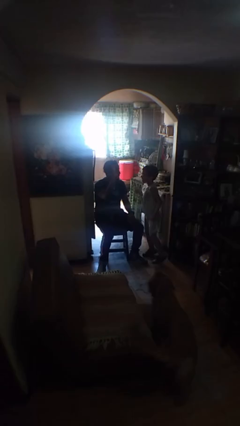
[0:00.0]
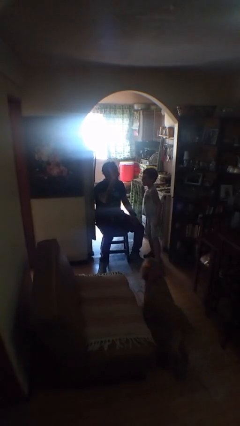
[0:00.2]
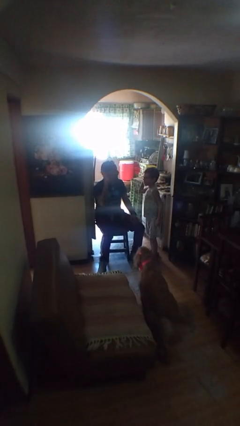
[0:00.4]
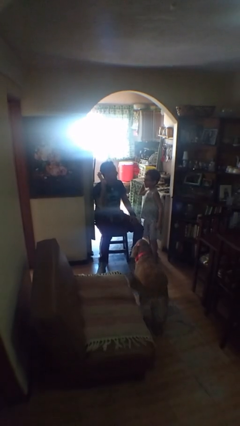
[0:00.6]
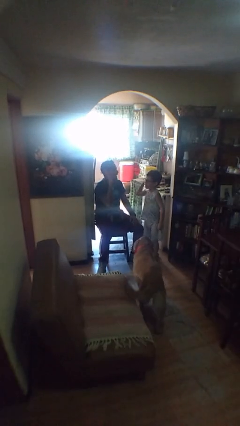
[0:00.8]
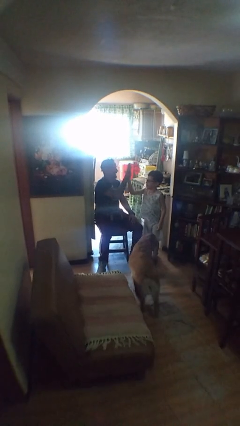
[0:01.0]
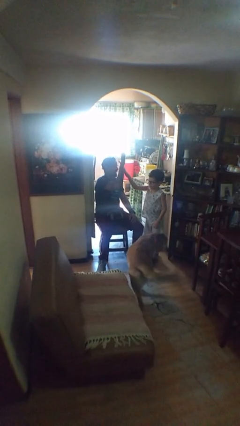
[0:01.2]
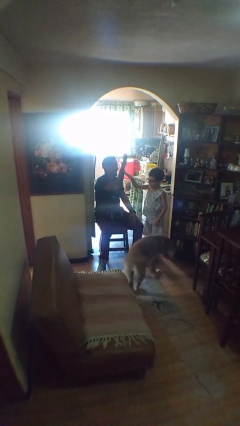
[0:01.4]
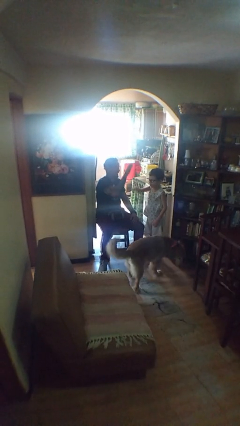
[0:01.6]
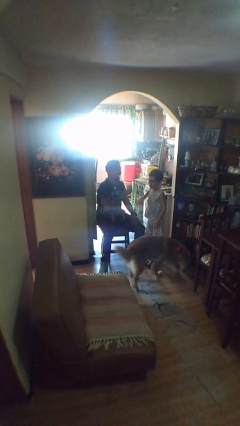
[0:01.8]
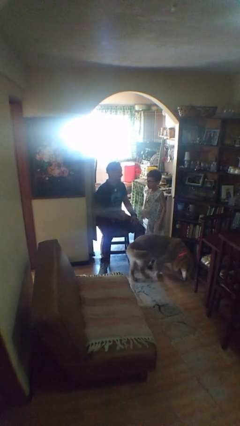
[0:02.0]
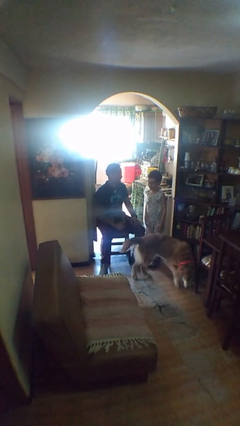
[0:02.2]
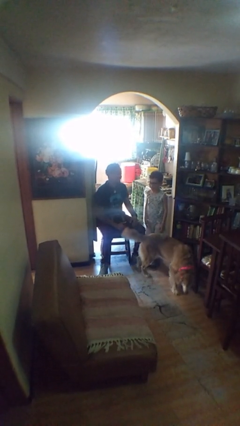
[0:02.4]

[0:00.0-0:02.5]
person highfives hand

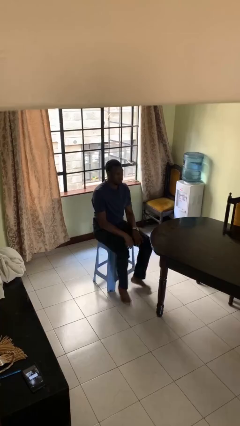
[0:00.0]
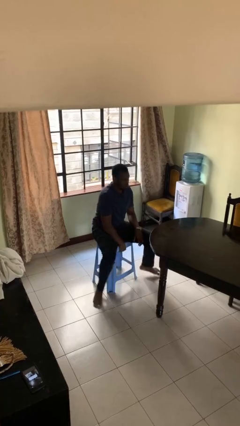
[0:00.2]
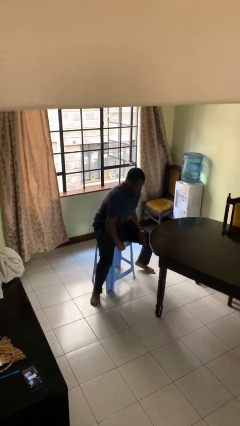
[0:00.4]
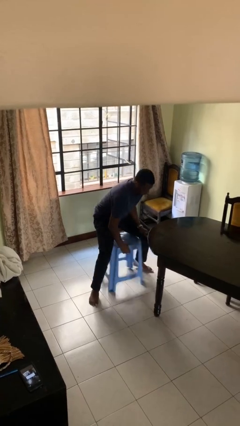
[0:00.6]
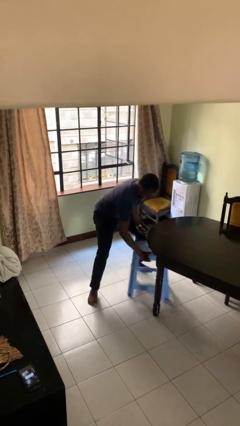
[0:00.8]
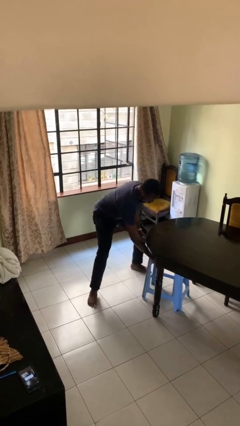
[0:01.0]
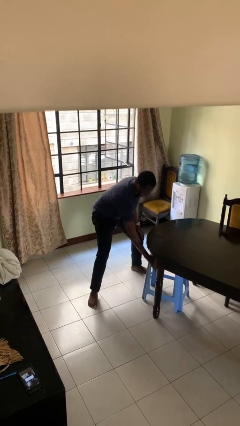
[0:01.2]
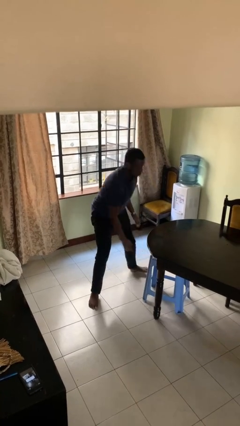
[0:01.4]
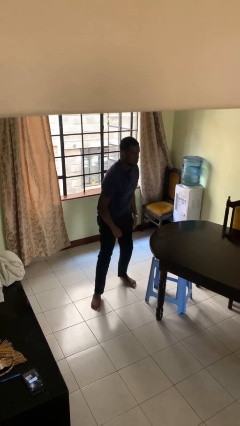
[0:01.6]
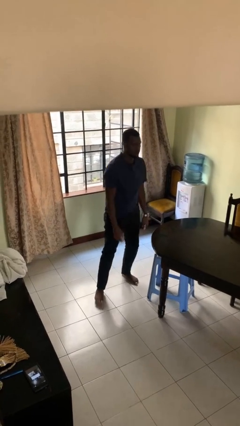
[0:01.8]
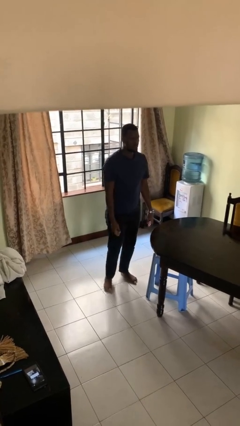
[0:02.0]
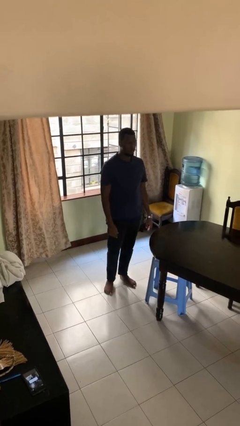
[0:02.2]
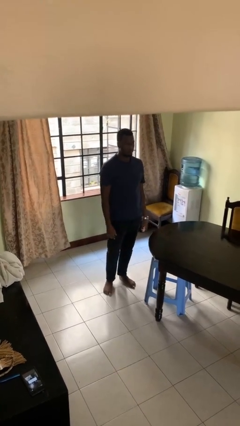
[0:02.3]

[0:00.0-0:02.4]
person stands up

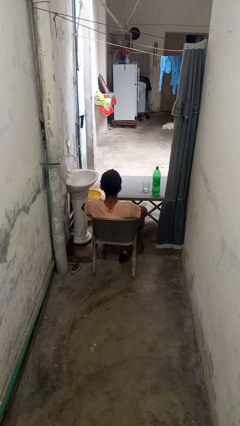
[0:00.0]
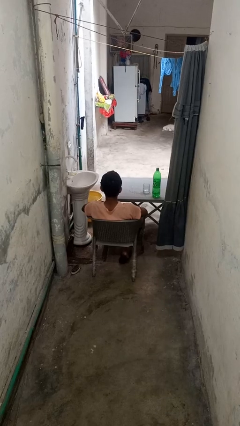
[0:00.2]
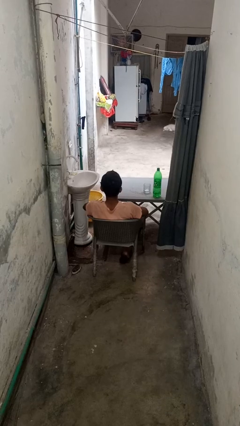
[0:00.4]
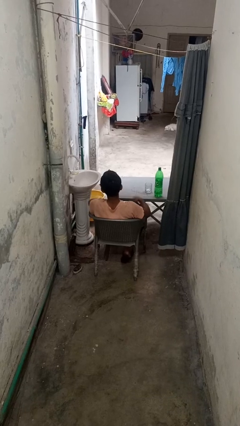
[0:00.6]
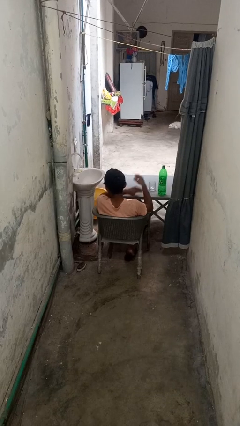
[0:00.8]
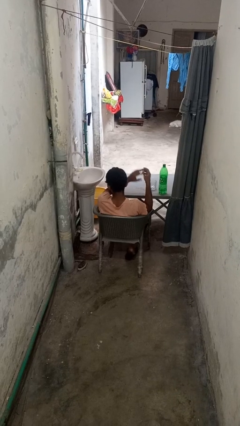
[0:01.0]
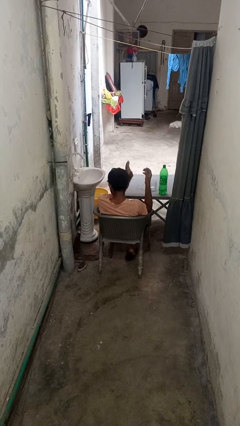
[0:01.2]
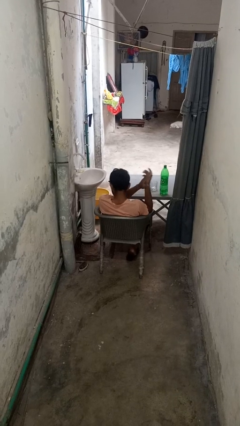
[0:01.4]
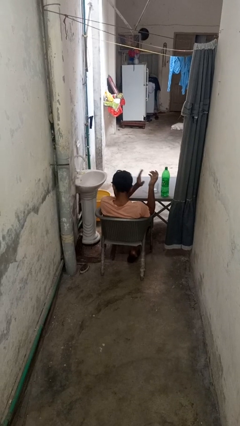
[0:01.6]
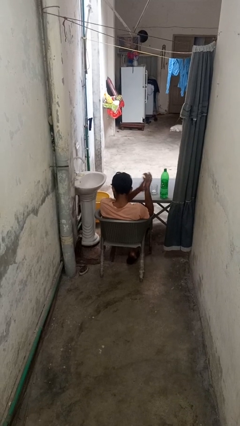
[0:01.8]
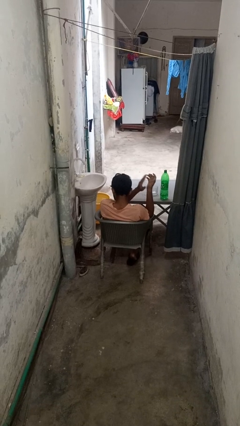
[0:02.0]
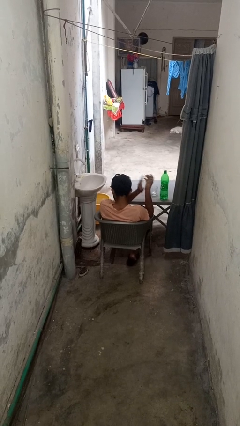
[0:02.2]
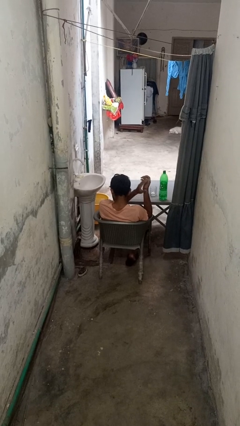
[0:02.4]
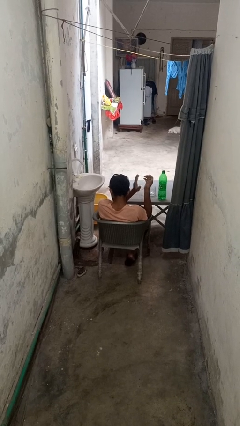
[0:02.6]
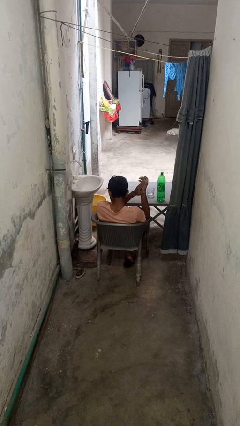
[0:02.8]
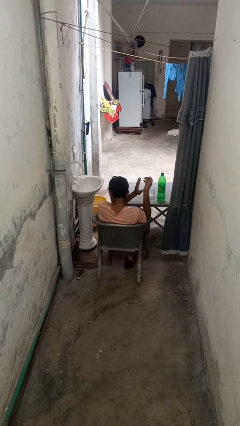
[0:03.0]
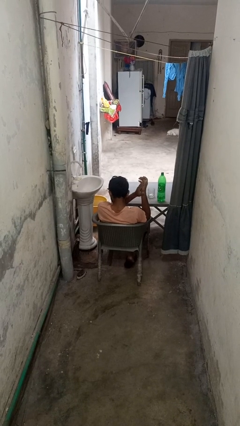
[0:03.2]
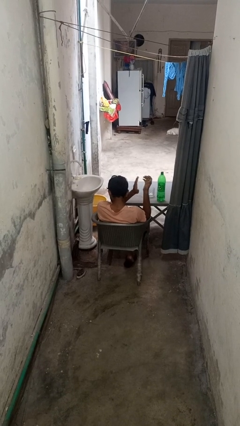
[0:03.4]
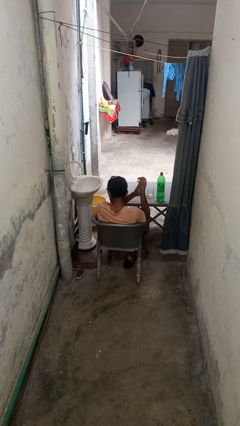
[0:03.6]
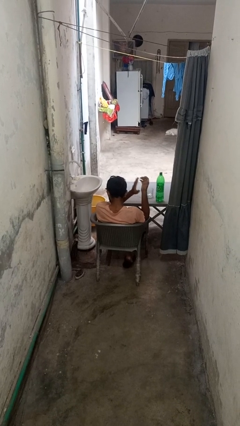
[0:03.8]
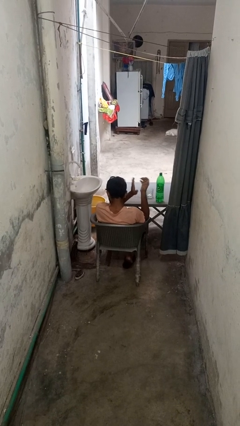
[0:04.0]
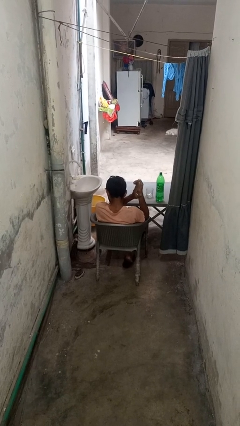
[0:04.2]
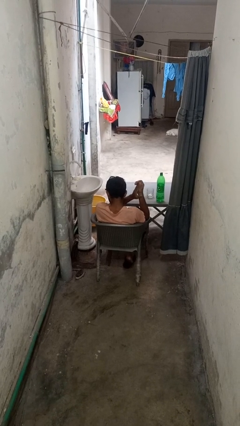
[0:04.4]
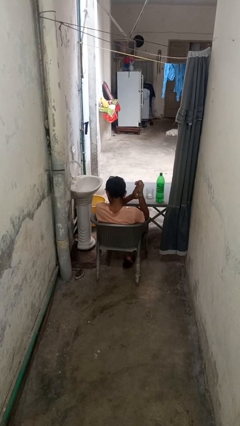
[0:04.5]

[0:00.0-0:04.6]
person claps hands

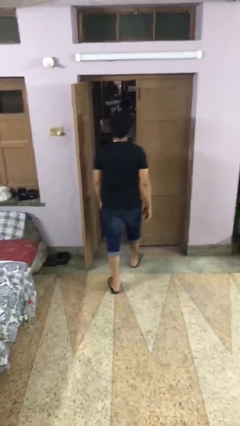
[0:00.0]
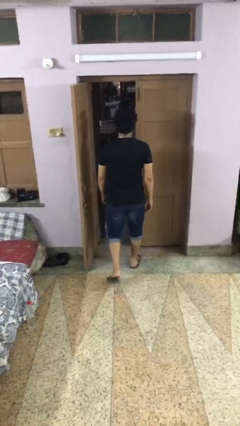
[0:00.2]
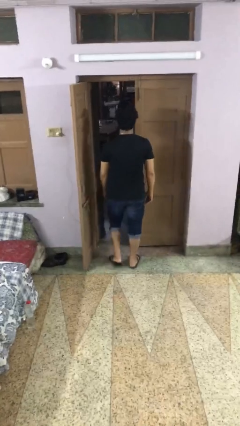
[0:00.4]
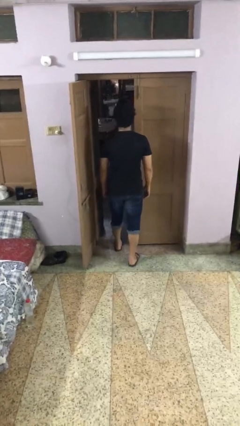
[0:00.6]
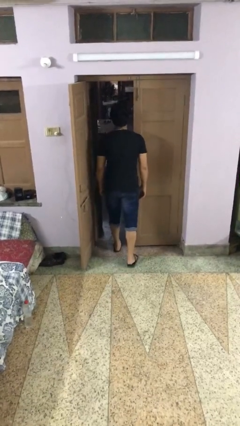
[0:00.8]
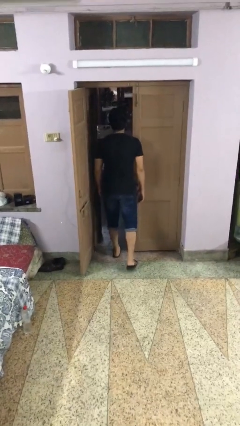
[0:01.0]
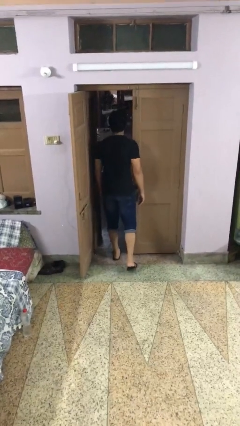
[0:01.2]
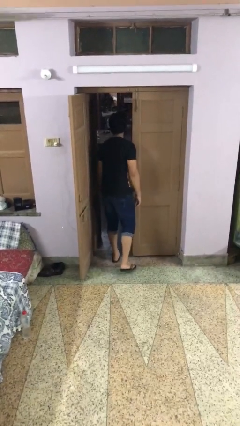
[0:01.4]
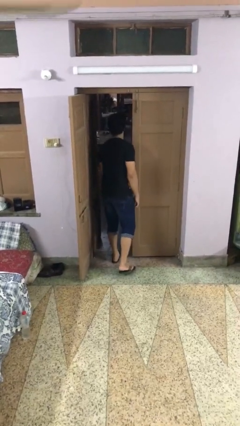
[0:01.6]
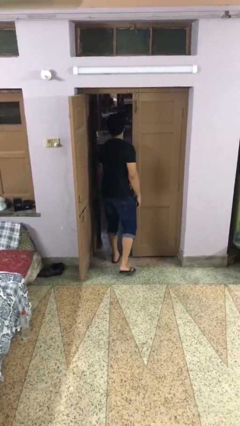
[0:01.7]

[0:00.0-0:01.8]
person bumps into wall

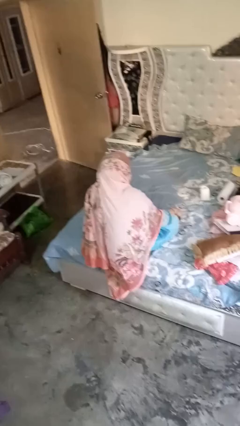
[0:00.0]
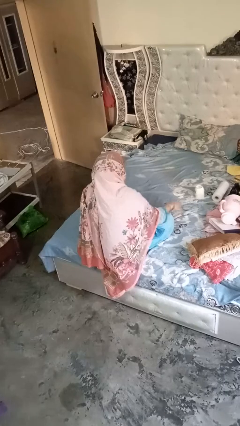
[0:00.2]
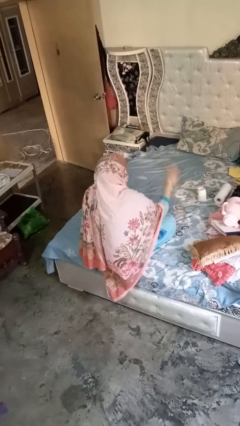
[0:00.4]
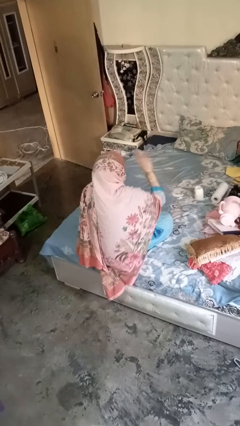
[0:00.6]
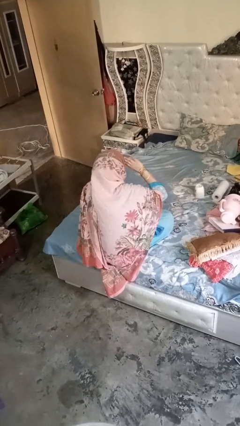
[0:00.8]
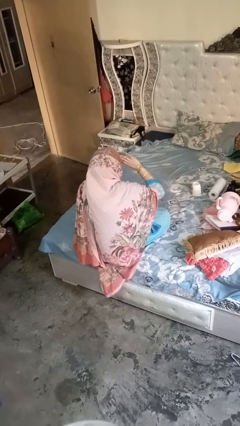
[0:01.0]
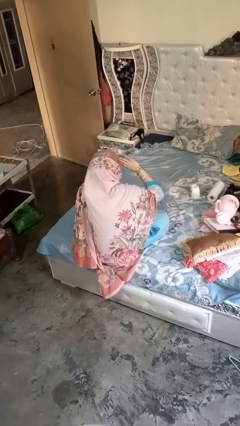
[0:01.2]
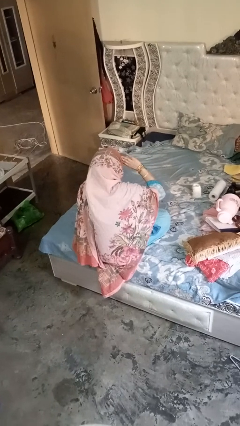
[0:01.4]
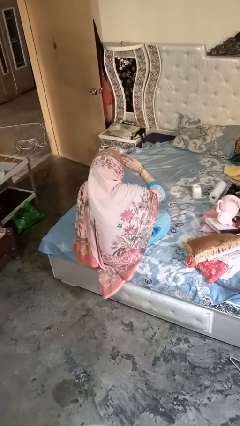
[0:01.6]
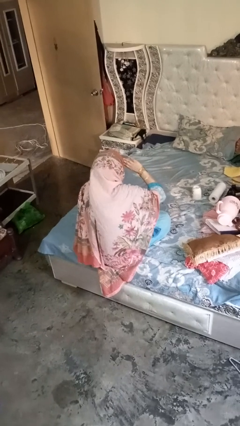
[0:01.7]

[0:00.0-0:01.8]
person salutes

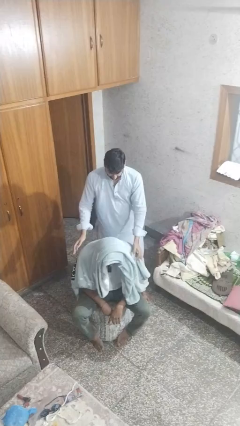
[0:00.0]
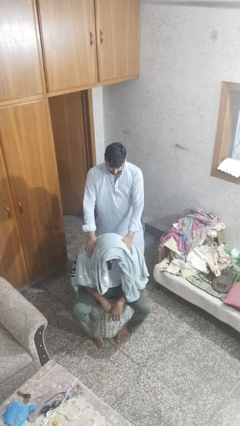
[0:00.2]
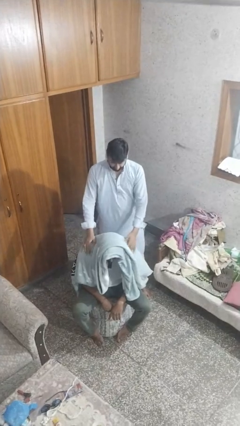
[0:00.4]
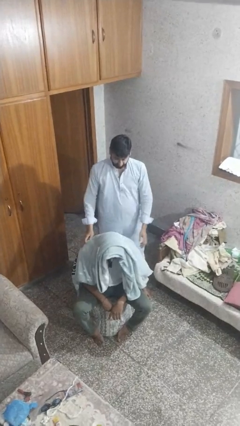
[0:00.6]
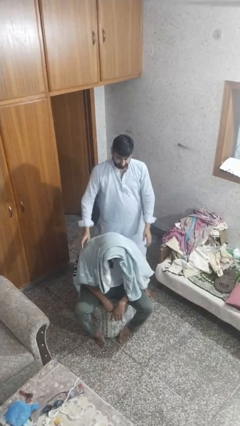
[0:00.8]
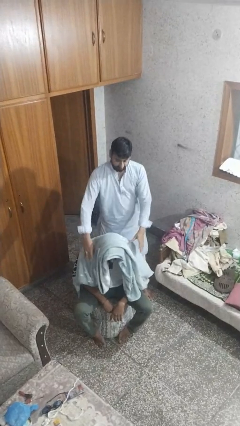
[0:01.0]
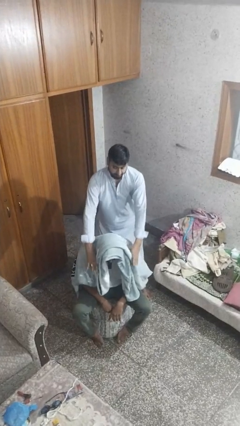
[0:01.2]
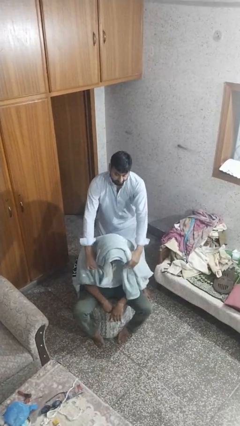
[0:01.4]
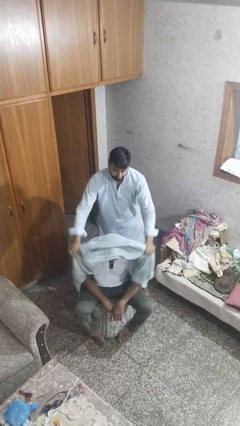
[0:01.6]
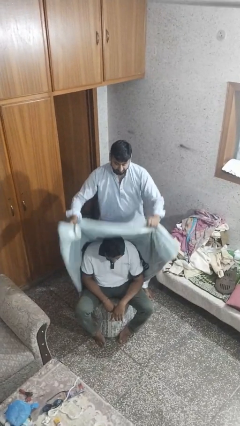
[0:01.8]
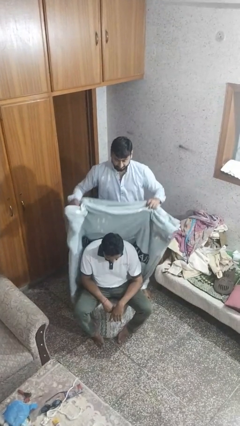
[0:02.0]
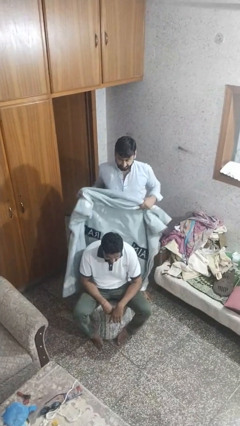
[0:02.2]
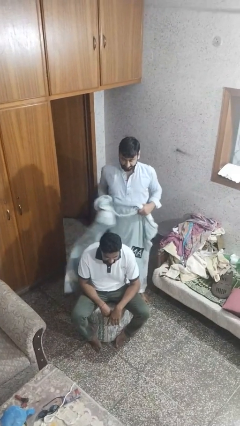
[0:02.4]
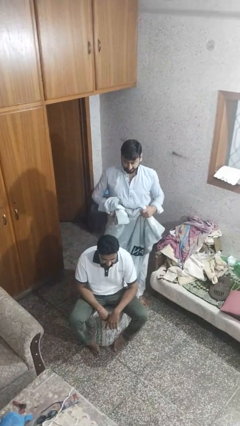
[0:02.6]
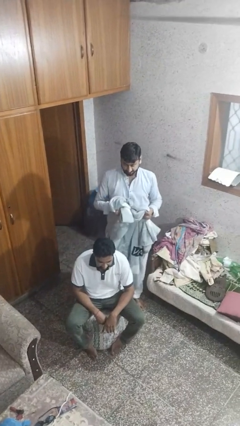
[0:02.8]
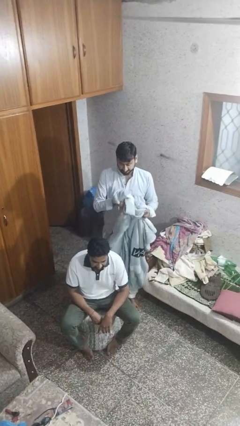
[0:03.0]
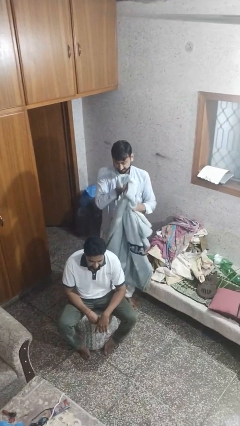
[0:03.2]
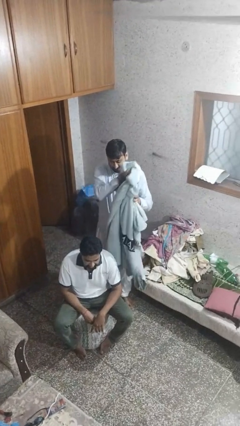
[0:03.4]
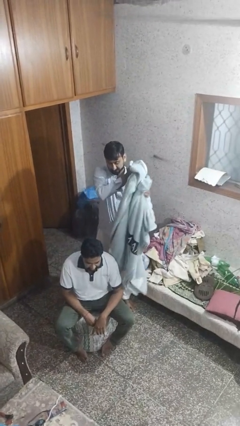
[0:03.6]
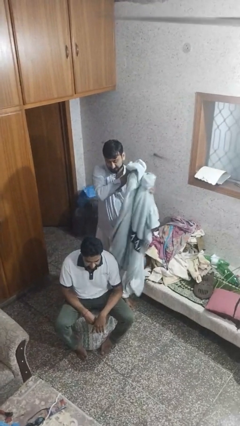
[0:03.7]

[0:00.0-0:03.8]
person uncovers friend with blanket

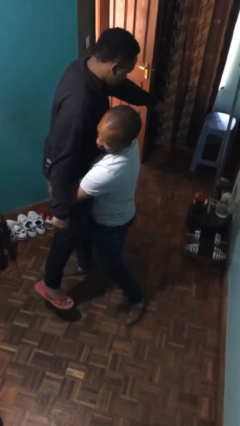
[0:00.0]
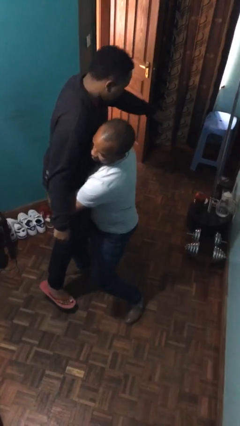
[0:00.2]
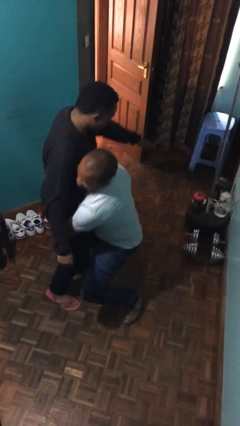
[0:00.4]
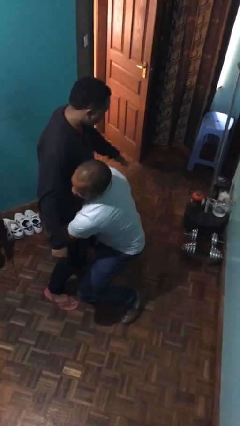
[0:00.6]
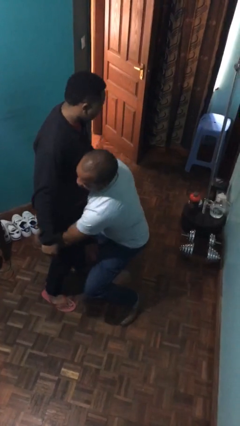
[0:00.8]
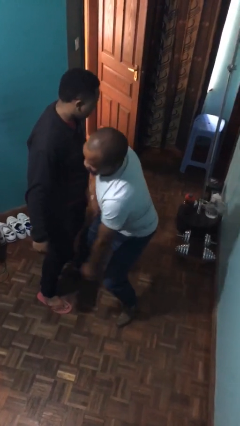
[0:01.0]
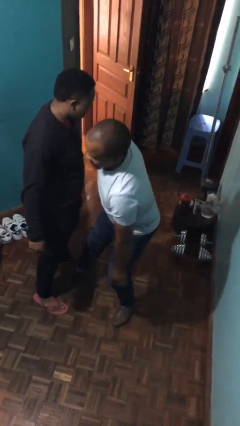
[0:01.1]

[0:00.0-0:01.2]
person puts down person
